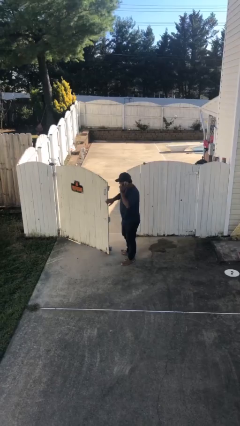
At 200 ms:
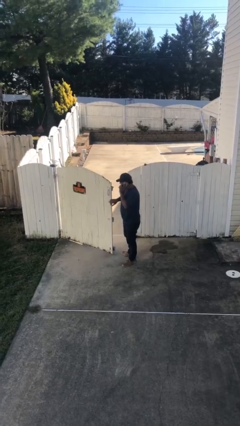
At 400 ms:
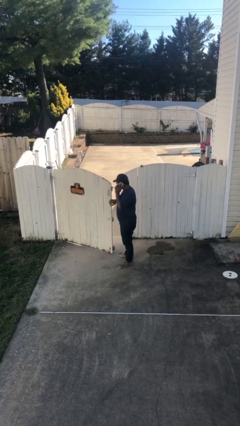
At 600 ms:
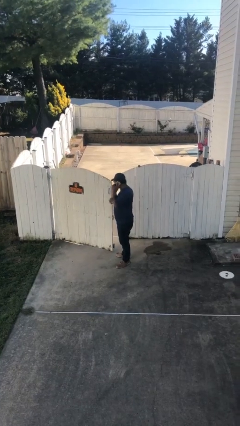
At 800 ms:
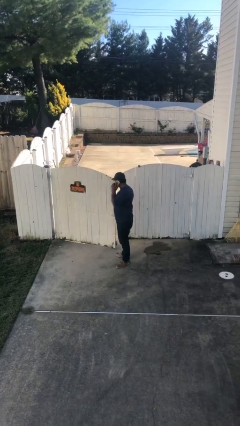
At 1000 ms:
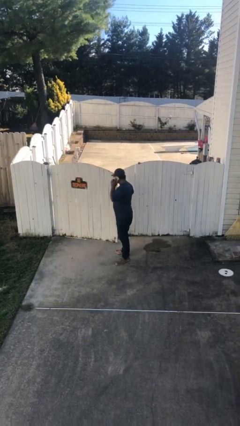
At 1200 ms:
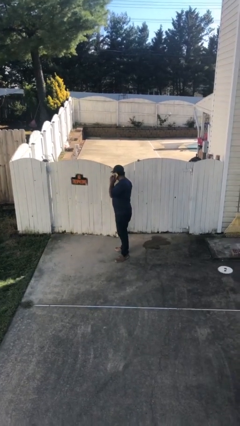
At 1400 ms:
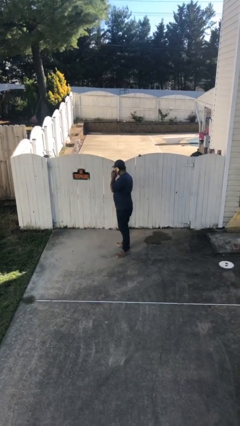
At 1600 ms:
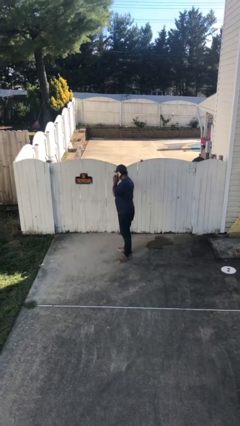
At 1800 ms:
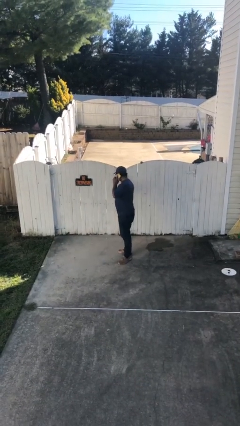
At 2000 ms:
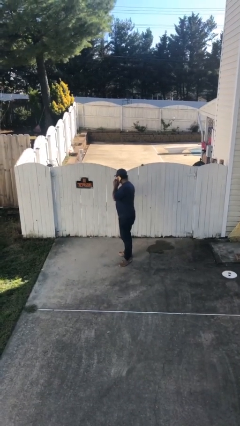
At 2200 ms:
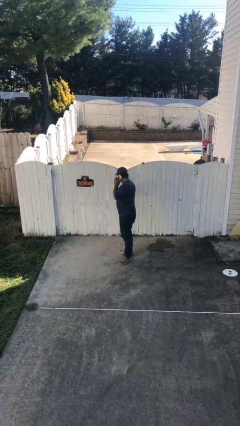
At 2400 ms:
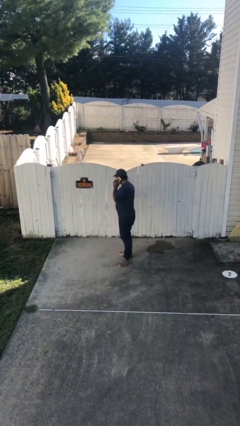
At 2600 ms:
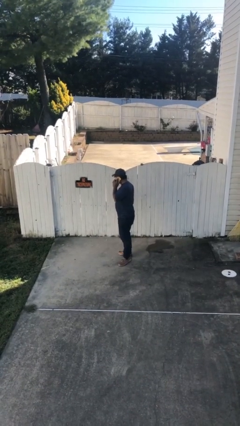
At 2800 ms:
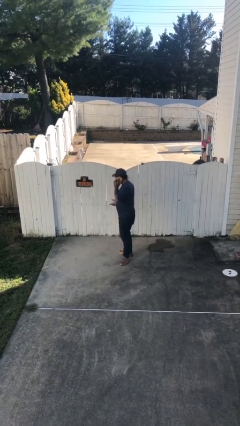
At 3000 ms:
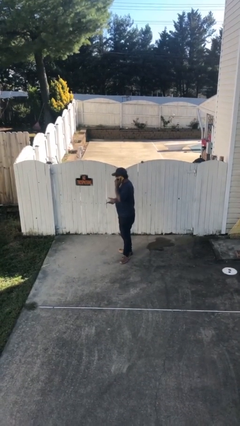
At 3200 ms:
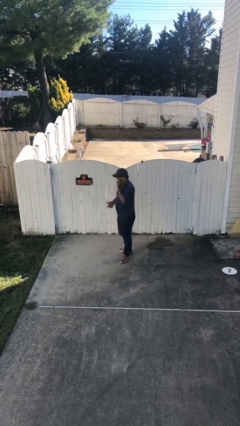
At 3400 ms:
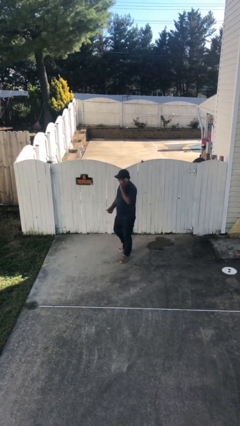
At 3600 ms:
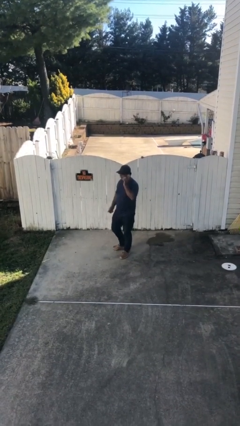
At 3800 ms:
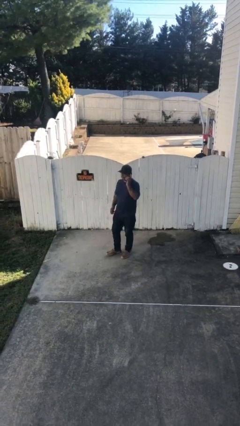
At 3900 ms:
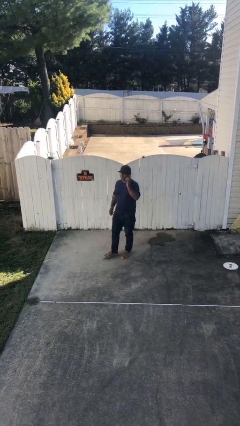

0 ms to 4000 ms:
person closes facility door

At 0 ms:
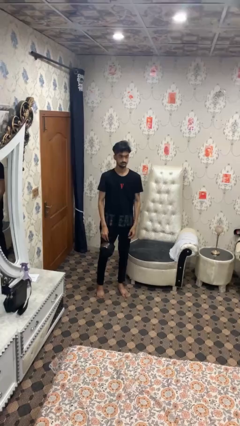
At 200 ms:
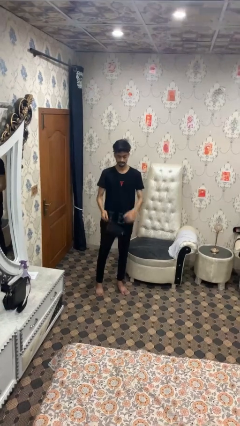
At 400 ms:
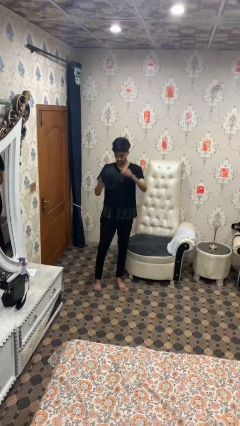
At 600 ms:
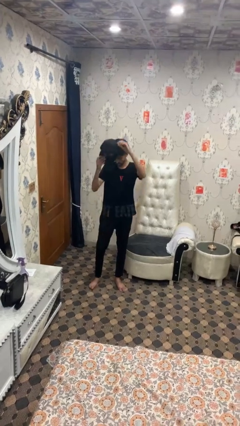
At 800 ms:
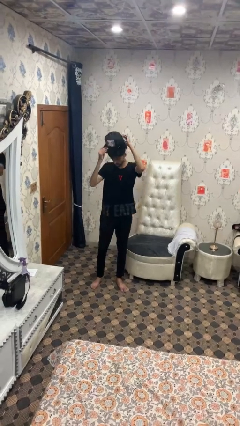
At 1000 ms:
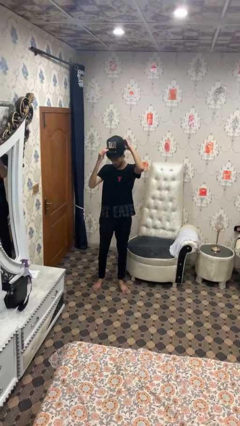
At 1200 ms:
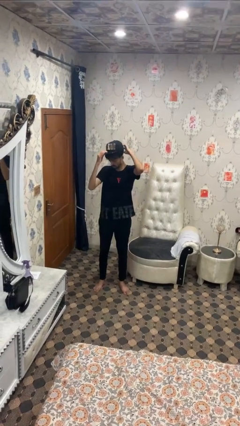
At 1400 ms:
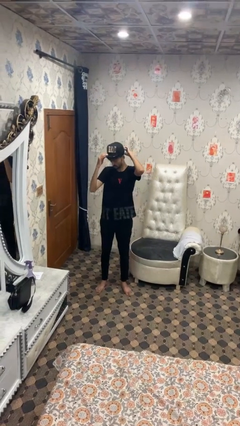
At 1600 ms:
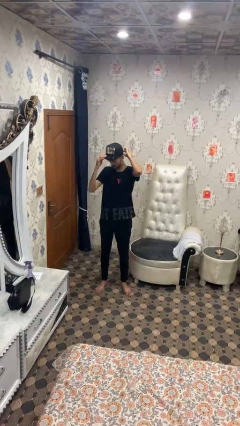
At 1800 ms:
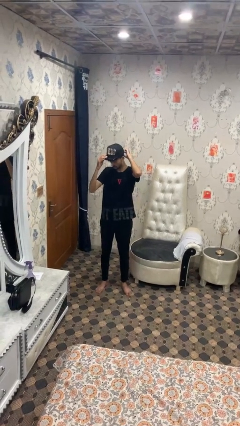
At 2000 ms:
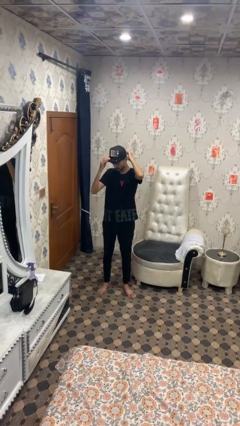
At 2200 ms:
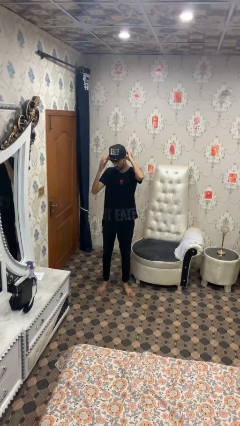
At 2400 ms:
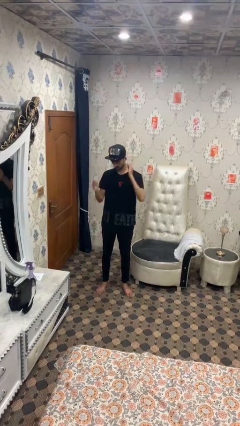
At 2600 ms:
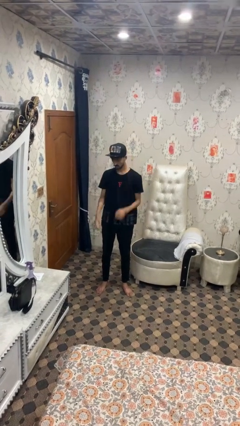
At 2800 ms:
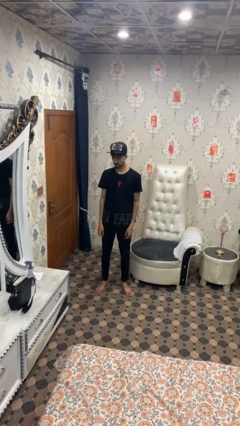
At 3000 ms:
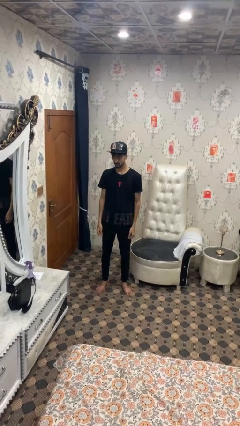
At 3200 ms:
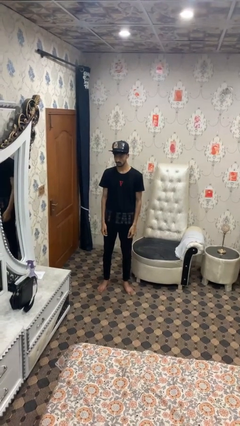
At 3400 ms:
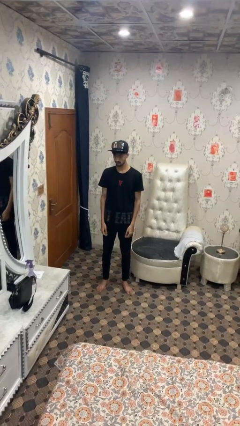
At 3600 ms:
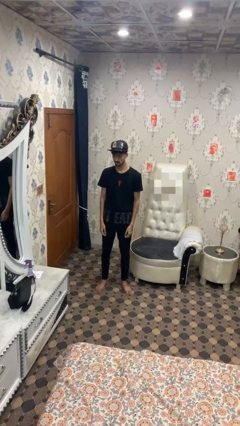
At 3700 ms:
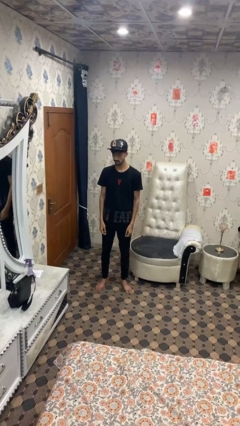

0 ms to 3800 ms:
person puts on hat

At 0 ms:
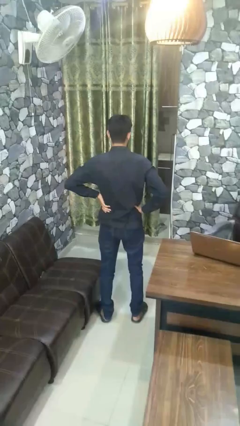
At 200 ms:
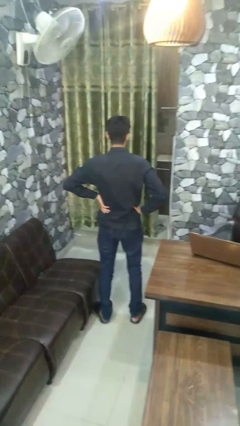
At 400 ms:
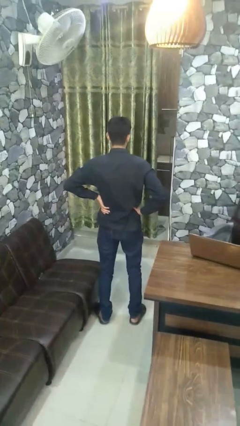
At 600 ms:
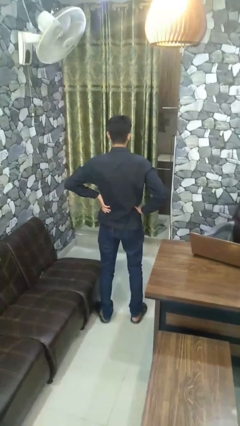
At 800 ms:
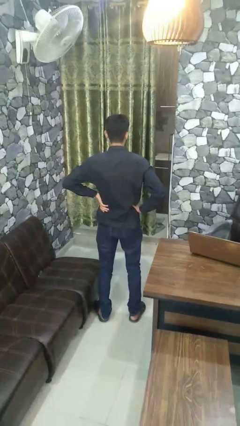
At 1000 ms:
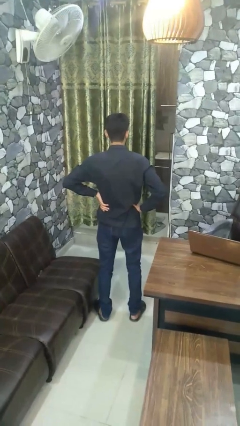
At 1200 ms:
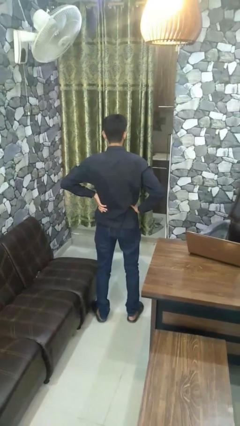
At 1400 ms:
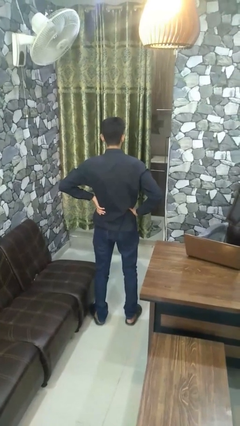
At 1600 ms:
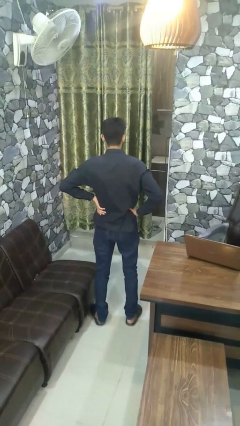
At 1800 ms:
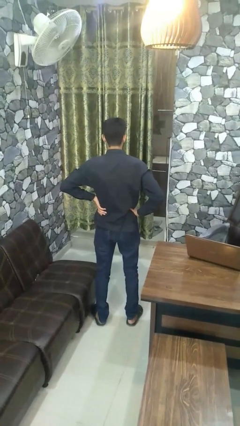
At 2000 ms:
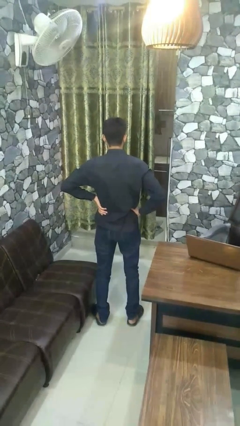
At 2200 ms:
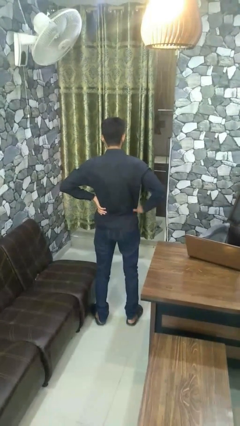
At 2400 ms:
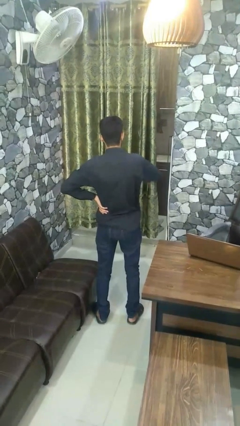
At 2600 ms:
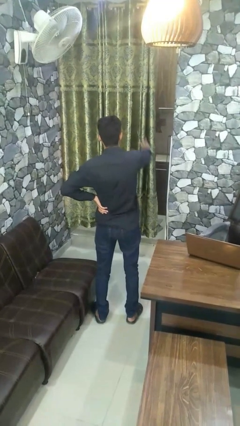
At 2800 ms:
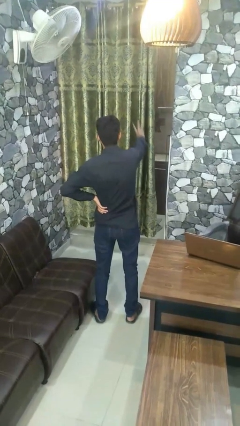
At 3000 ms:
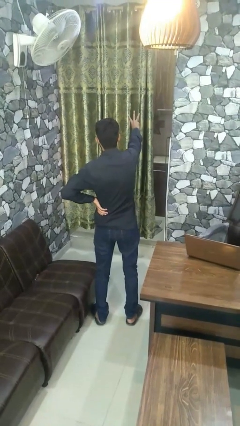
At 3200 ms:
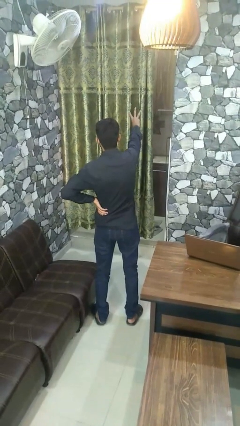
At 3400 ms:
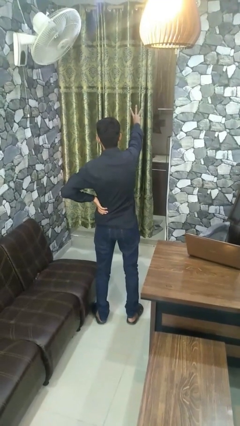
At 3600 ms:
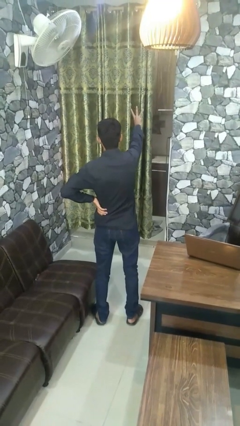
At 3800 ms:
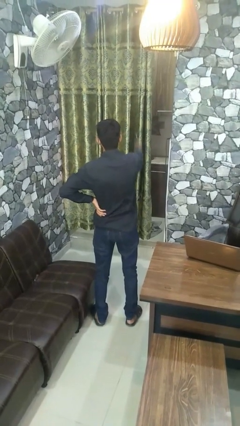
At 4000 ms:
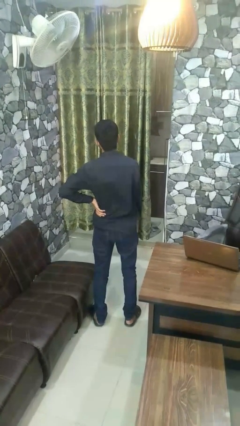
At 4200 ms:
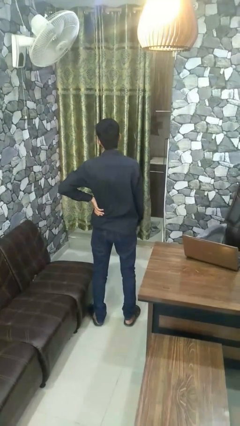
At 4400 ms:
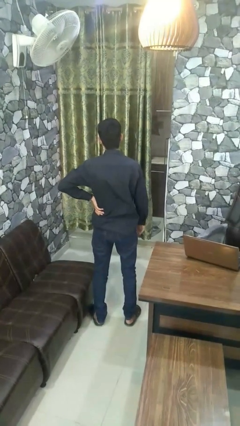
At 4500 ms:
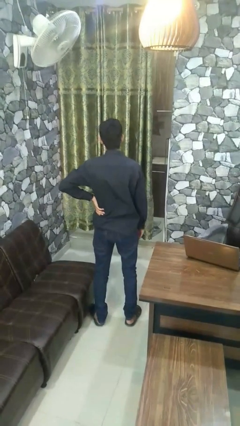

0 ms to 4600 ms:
person gestures number three

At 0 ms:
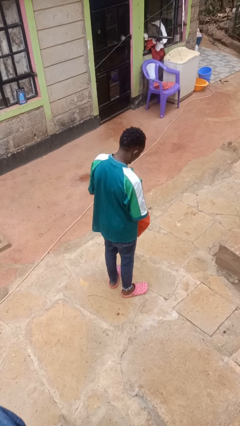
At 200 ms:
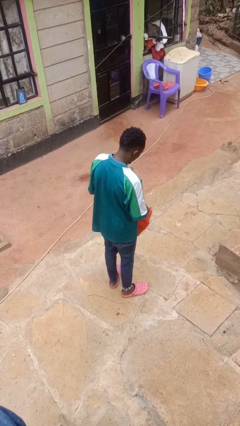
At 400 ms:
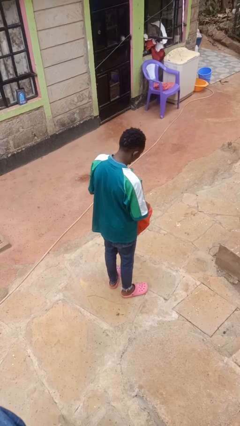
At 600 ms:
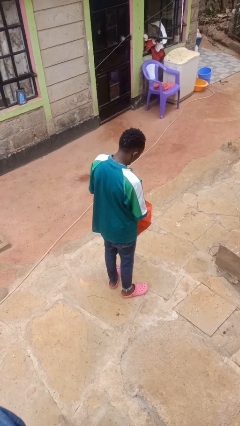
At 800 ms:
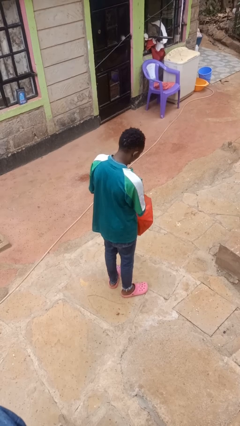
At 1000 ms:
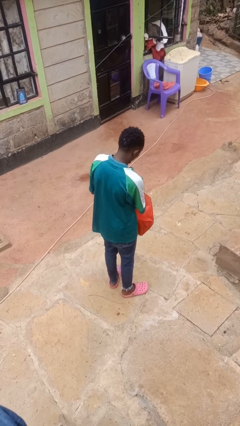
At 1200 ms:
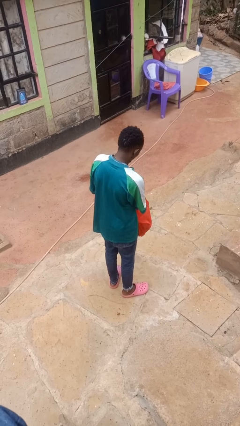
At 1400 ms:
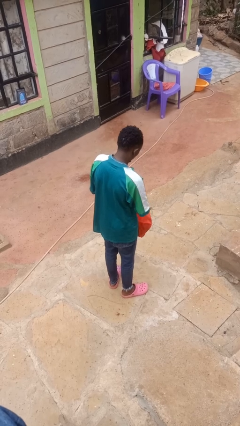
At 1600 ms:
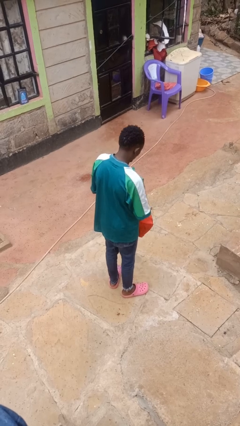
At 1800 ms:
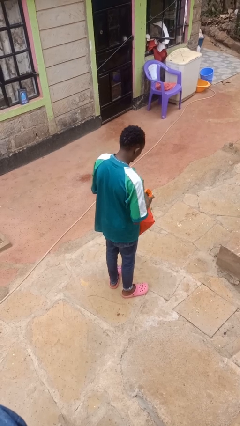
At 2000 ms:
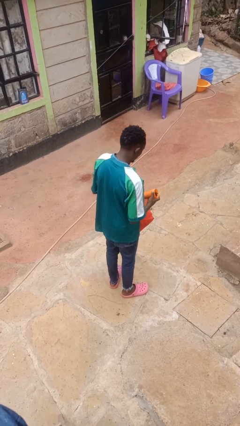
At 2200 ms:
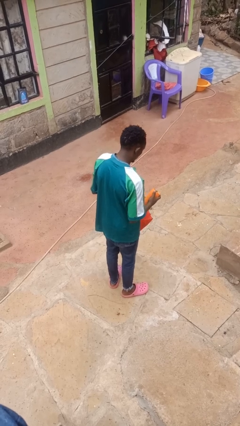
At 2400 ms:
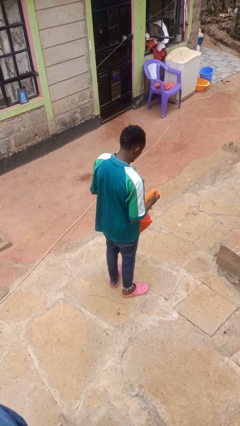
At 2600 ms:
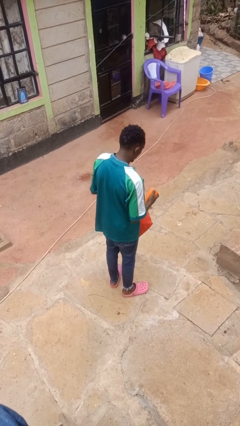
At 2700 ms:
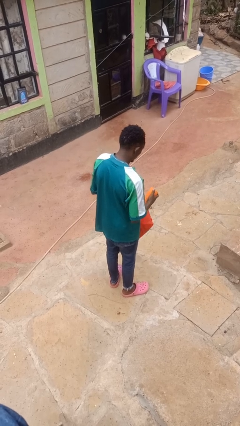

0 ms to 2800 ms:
person takes object from bag

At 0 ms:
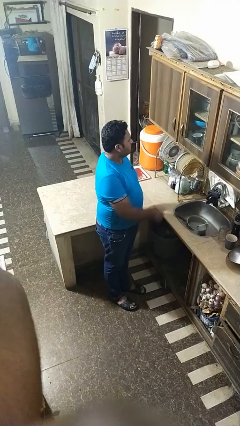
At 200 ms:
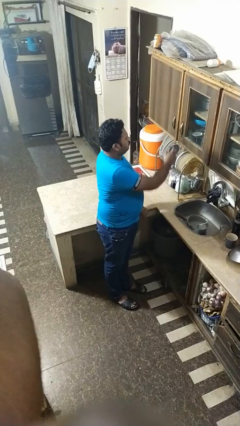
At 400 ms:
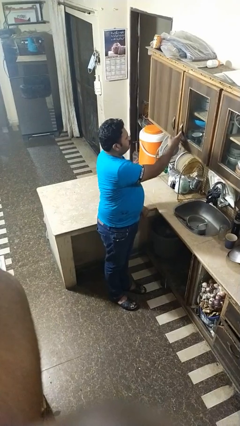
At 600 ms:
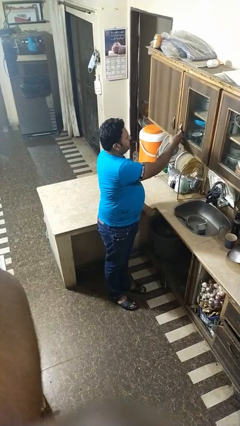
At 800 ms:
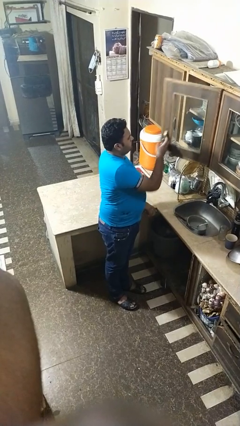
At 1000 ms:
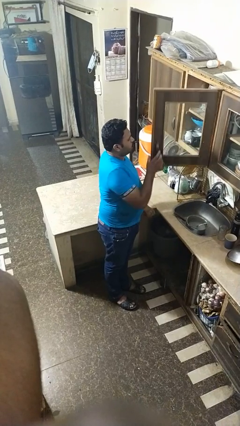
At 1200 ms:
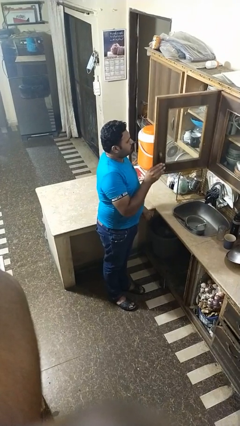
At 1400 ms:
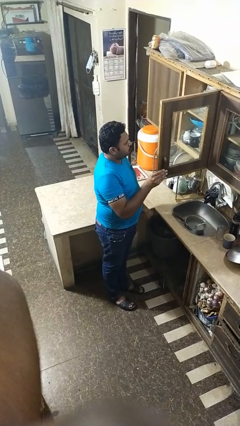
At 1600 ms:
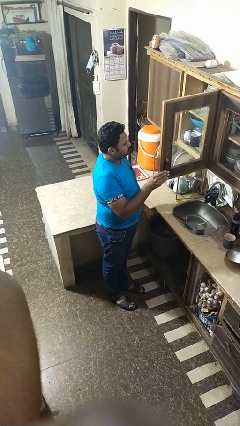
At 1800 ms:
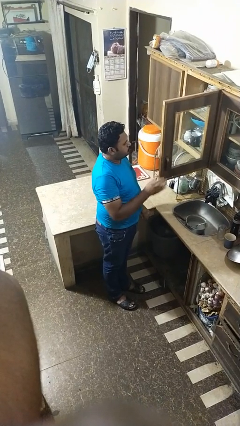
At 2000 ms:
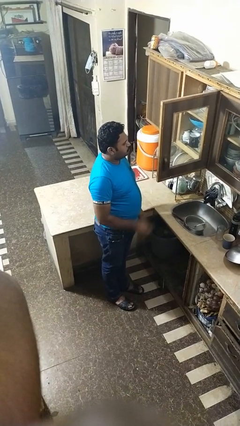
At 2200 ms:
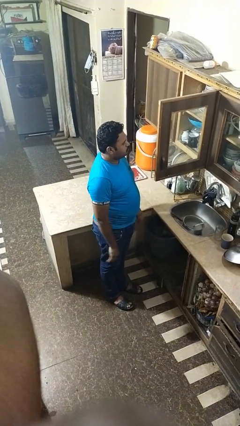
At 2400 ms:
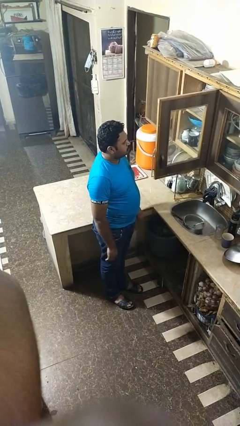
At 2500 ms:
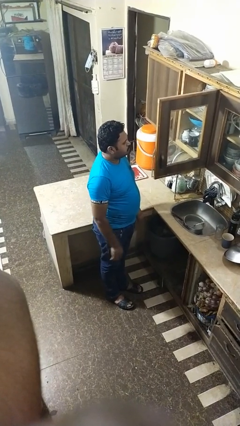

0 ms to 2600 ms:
person opens cabinet
